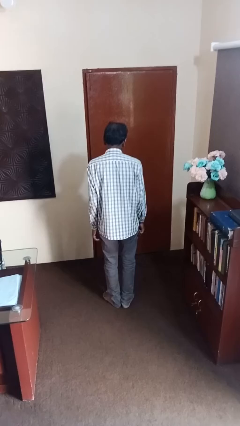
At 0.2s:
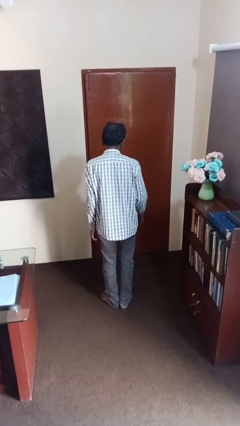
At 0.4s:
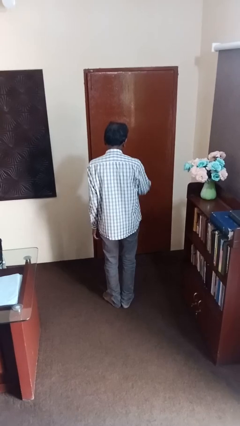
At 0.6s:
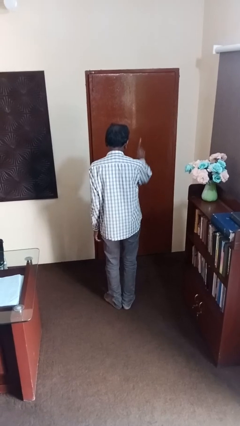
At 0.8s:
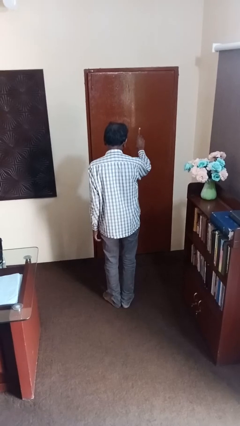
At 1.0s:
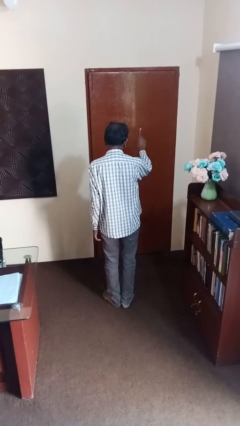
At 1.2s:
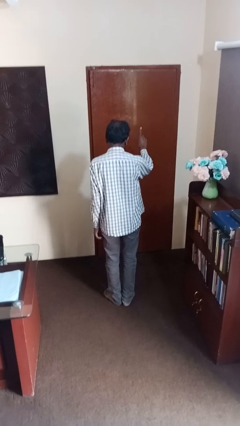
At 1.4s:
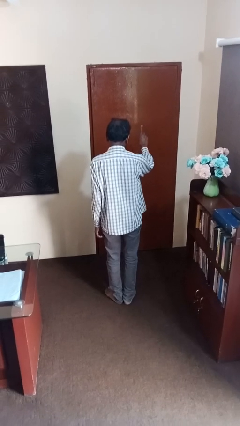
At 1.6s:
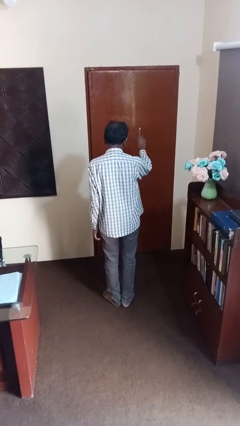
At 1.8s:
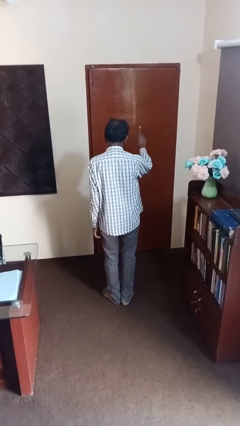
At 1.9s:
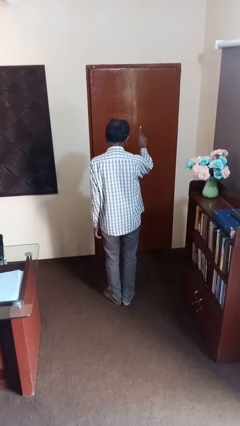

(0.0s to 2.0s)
person gestures number one

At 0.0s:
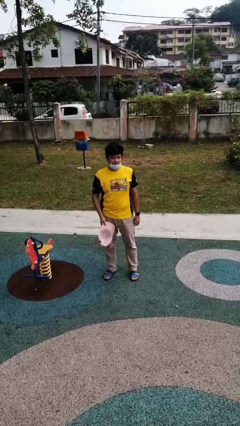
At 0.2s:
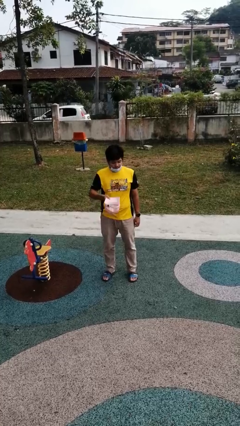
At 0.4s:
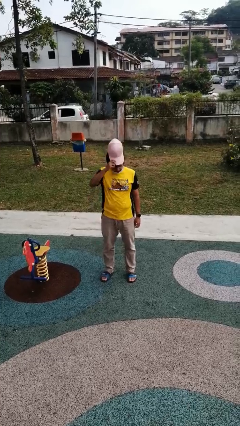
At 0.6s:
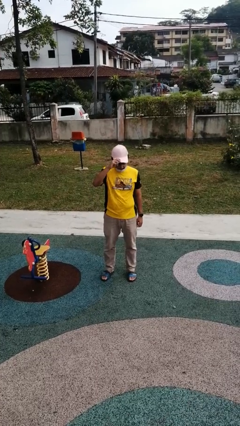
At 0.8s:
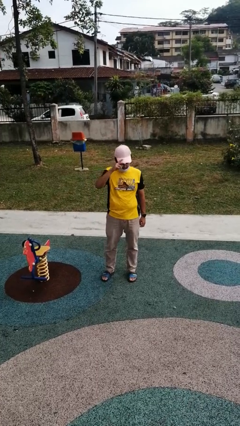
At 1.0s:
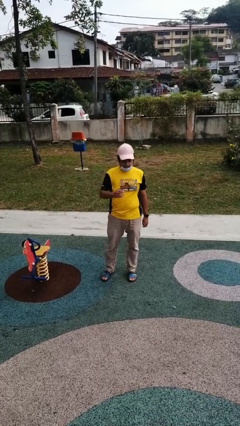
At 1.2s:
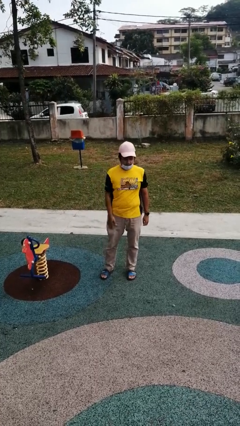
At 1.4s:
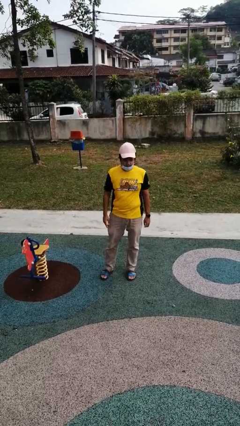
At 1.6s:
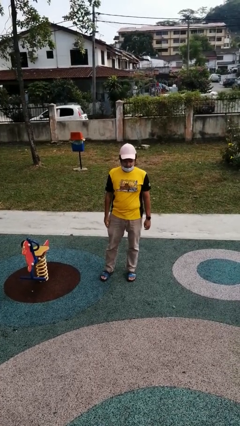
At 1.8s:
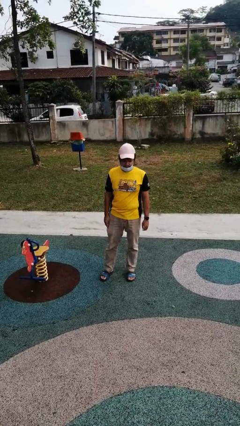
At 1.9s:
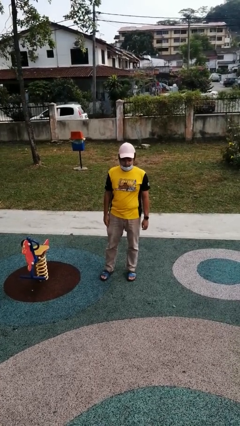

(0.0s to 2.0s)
person puts on hat

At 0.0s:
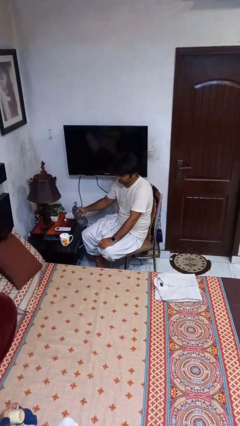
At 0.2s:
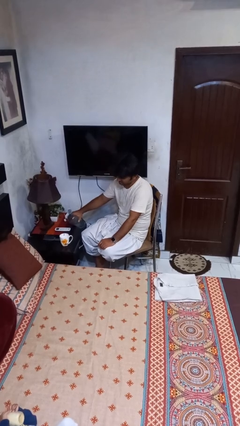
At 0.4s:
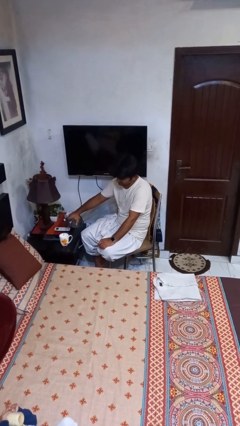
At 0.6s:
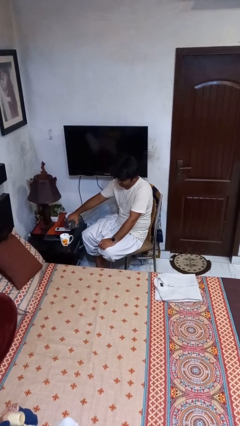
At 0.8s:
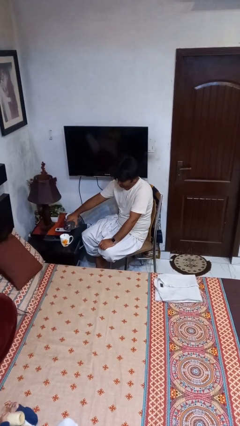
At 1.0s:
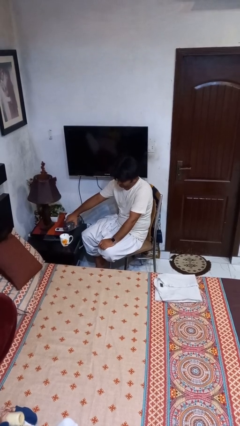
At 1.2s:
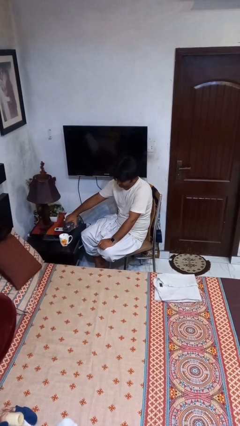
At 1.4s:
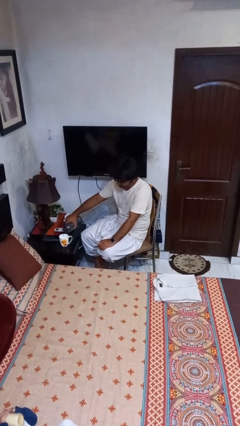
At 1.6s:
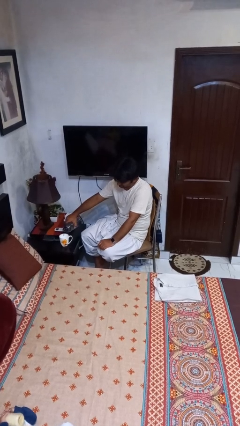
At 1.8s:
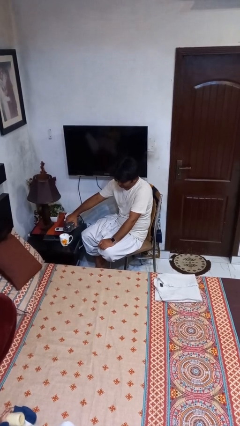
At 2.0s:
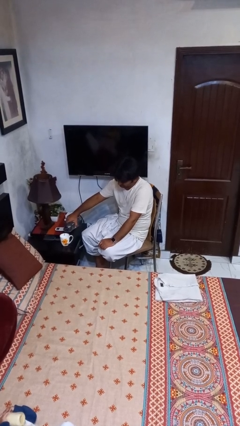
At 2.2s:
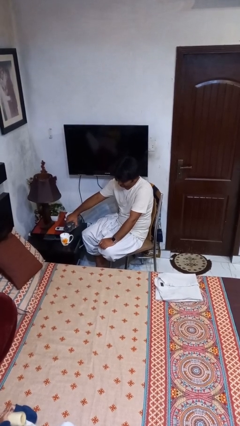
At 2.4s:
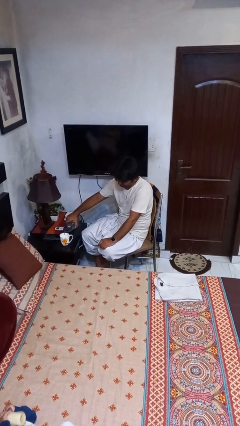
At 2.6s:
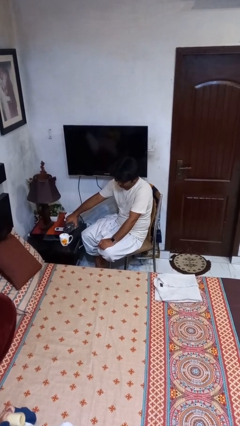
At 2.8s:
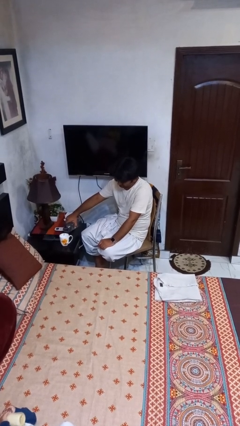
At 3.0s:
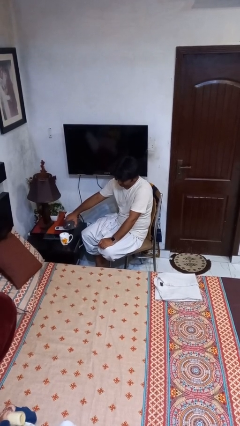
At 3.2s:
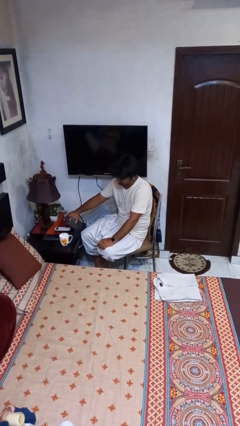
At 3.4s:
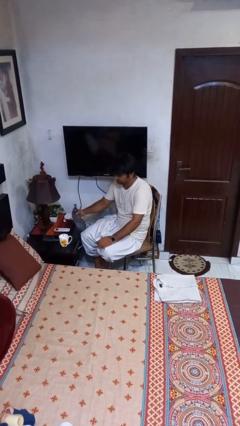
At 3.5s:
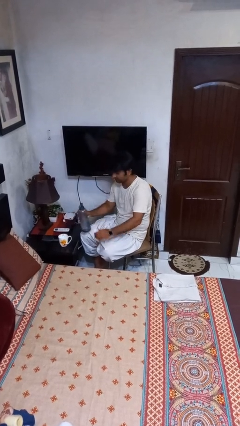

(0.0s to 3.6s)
person pours liquid into cup

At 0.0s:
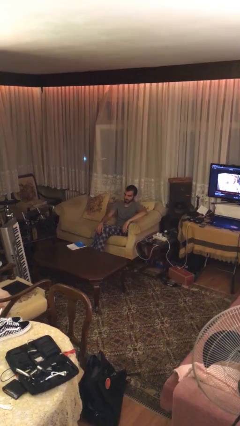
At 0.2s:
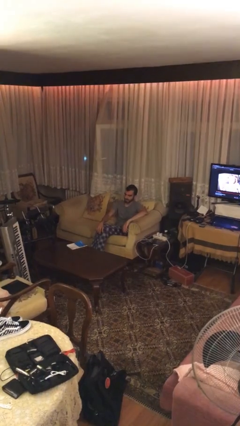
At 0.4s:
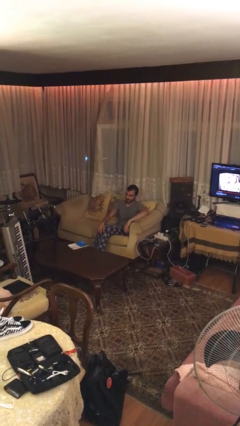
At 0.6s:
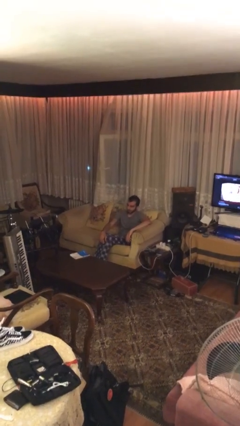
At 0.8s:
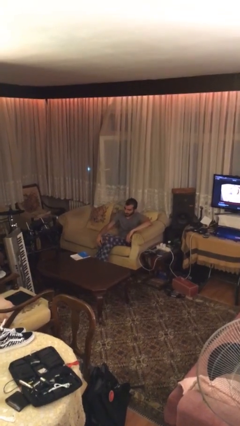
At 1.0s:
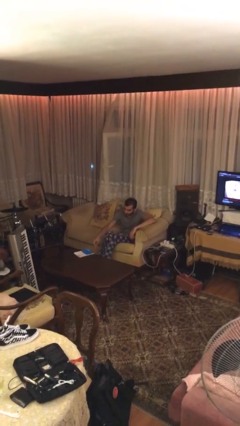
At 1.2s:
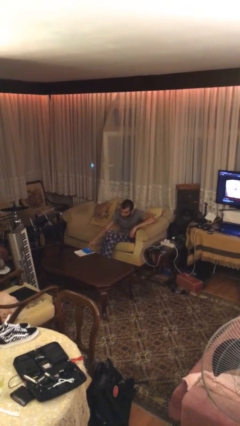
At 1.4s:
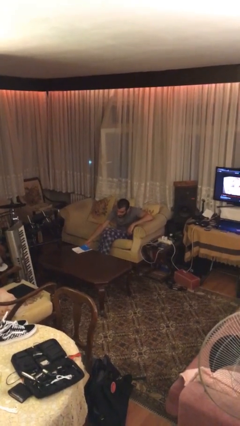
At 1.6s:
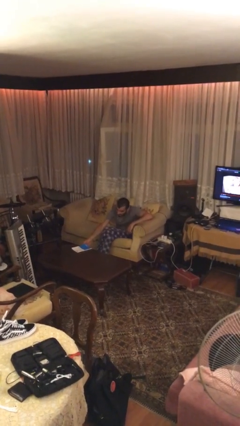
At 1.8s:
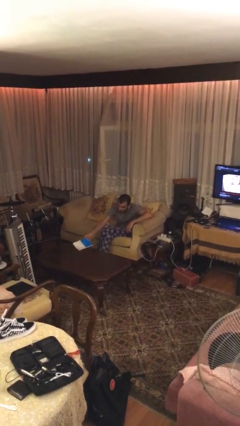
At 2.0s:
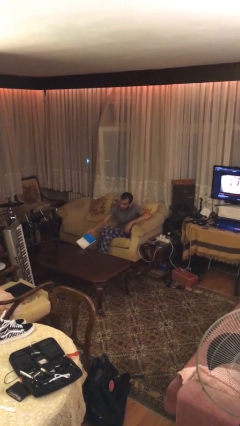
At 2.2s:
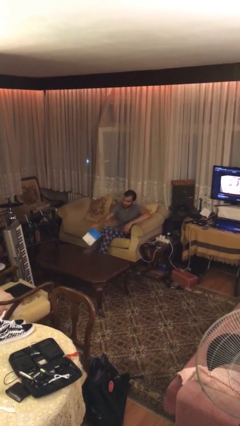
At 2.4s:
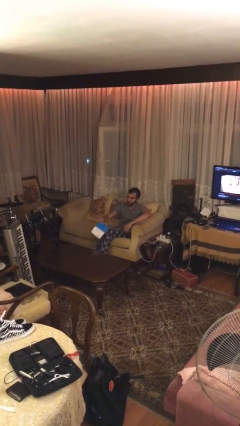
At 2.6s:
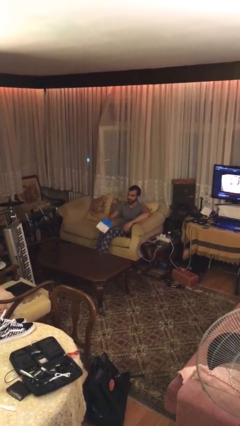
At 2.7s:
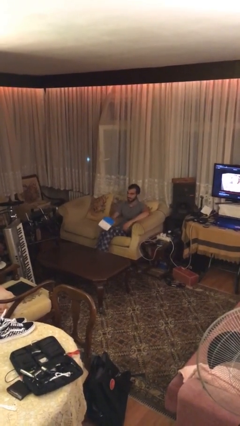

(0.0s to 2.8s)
person picks up object from table

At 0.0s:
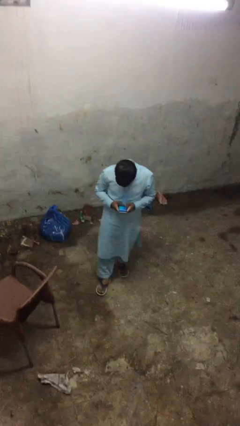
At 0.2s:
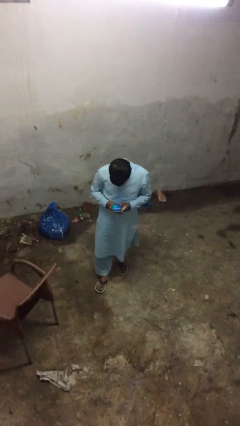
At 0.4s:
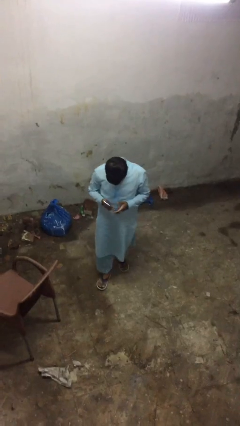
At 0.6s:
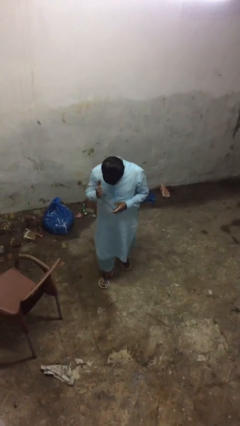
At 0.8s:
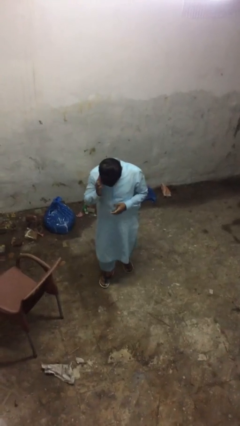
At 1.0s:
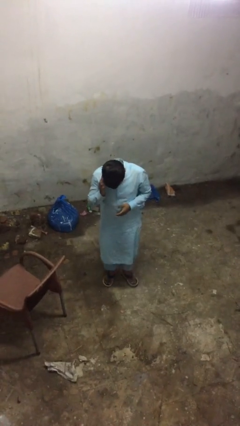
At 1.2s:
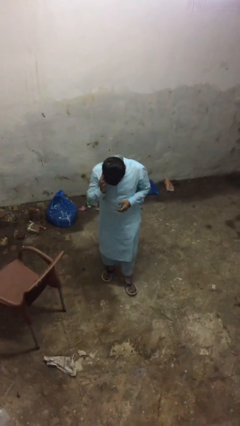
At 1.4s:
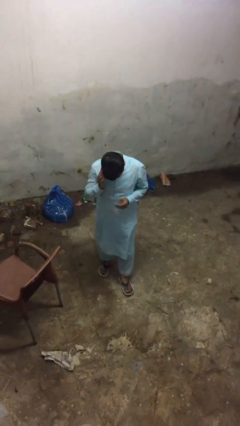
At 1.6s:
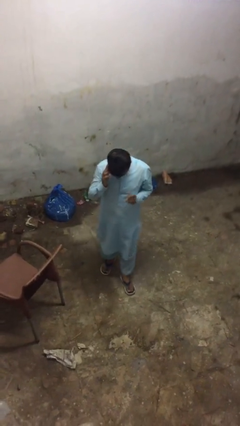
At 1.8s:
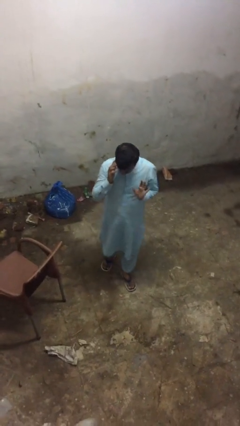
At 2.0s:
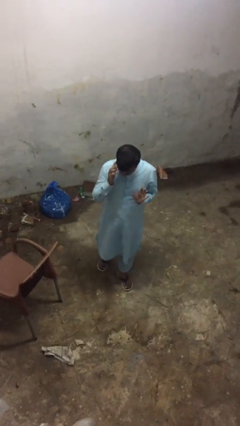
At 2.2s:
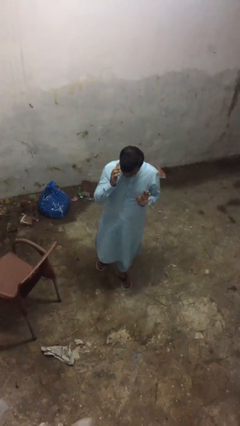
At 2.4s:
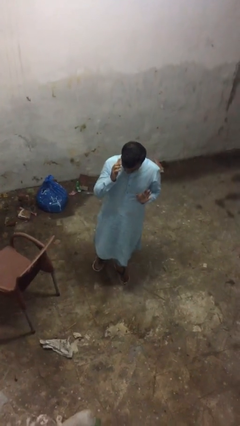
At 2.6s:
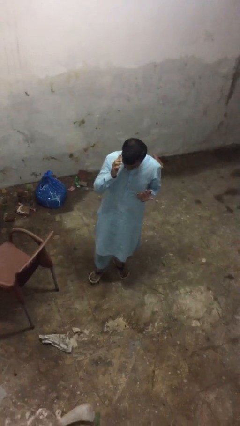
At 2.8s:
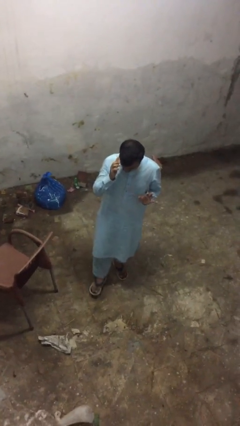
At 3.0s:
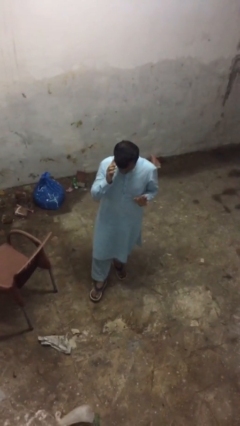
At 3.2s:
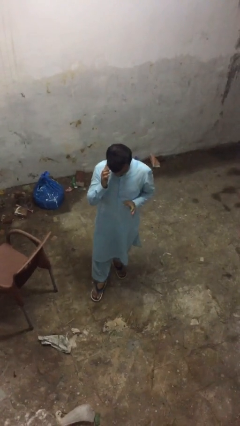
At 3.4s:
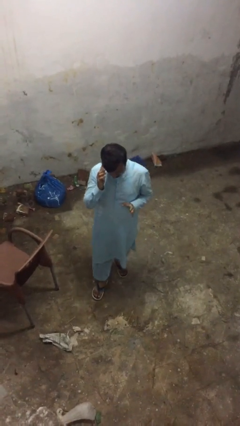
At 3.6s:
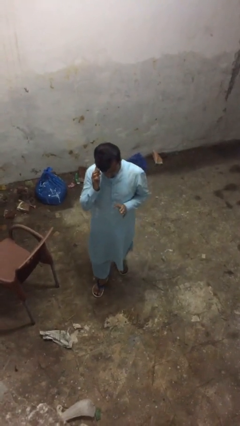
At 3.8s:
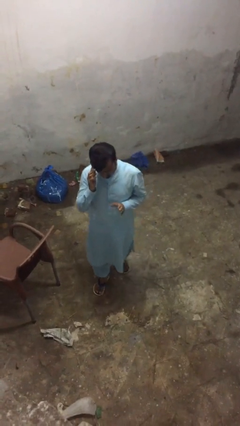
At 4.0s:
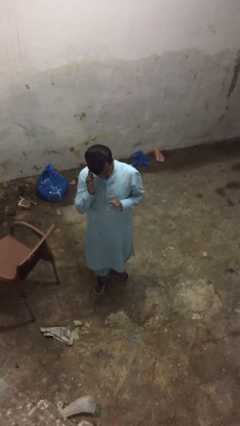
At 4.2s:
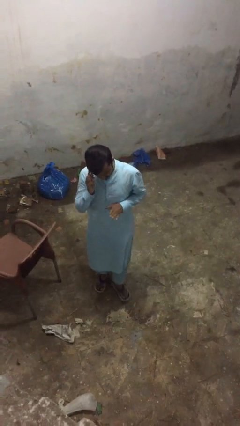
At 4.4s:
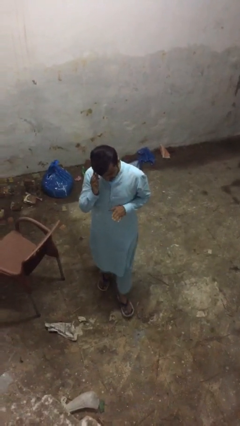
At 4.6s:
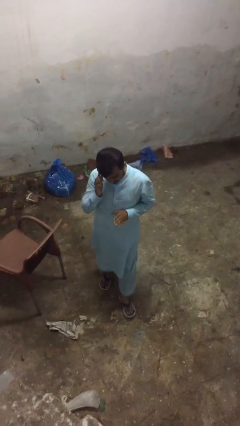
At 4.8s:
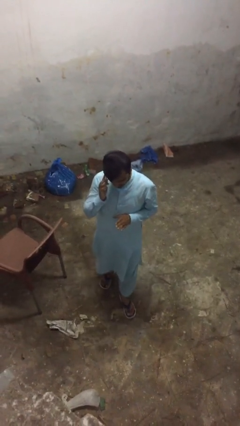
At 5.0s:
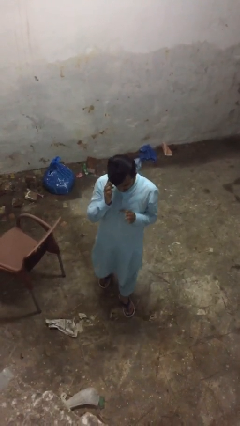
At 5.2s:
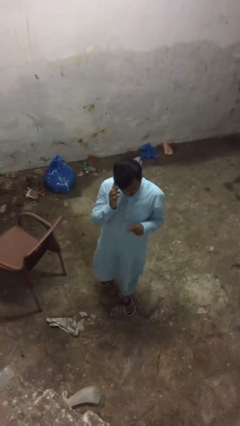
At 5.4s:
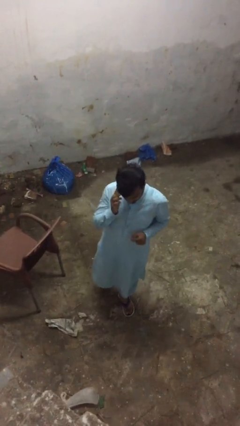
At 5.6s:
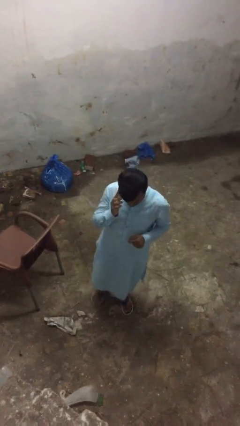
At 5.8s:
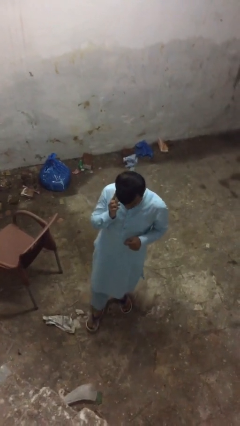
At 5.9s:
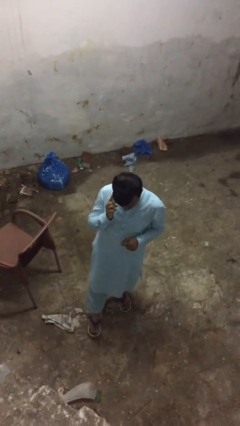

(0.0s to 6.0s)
person talks on phone

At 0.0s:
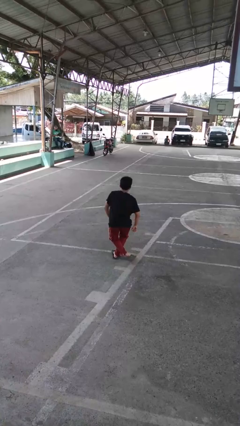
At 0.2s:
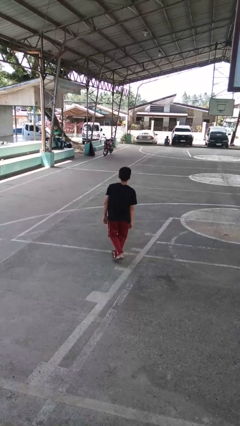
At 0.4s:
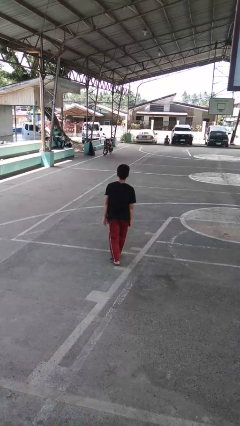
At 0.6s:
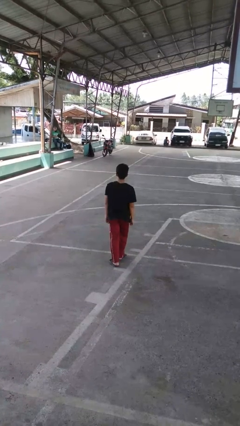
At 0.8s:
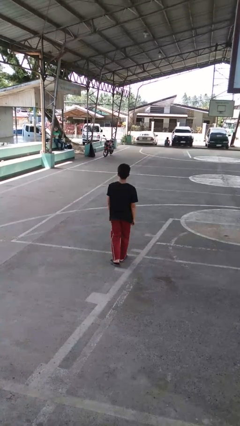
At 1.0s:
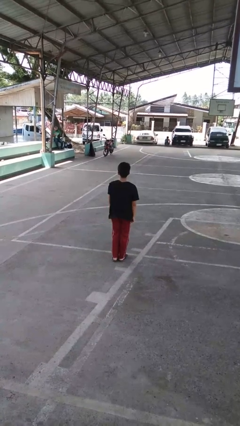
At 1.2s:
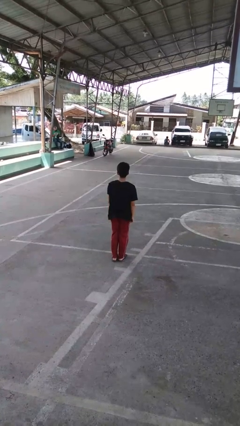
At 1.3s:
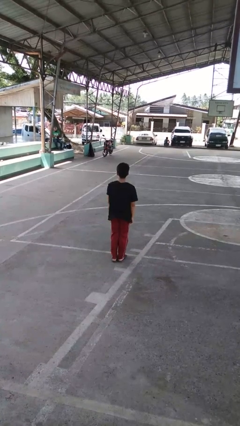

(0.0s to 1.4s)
person stands up from floor
